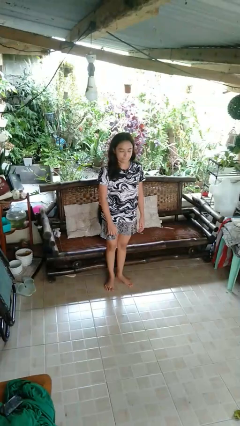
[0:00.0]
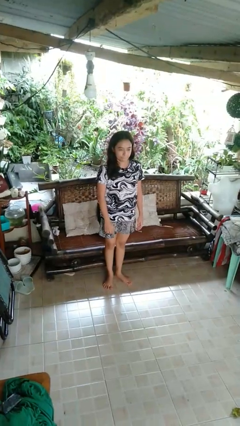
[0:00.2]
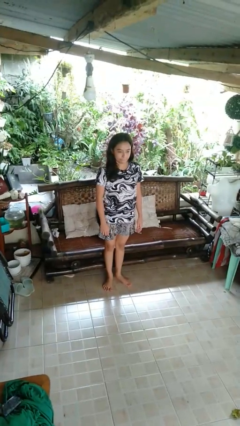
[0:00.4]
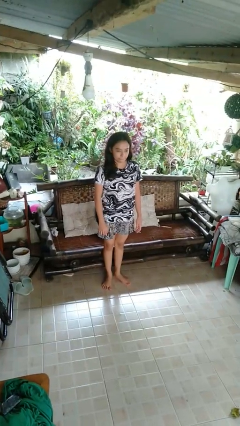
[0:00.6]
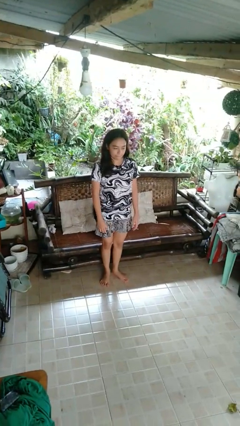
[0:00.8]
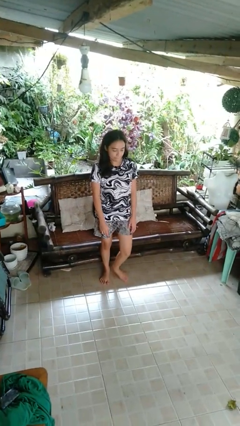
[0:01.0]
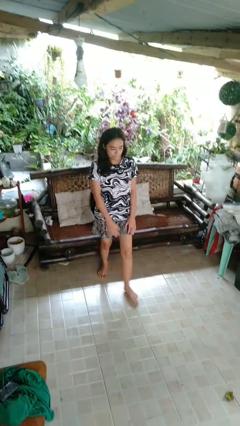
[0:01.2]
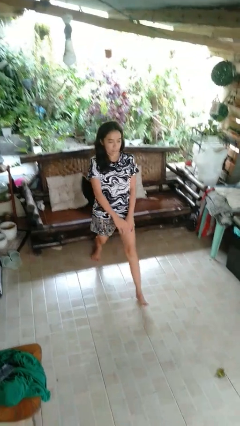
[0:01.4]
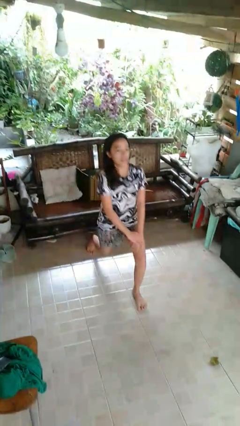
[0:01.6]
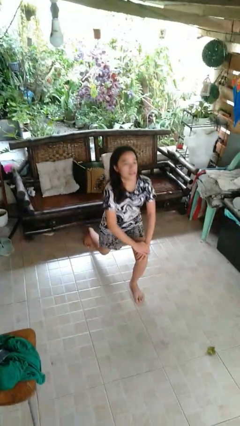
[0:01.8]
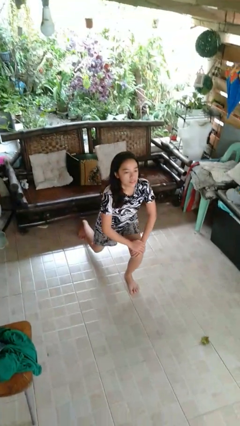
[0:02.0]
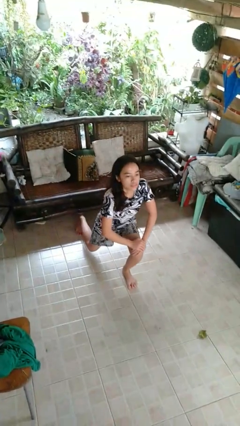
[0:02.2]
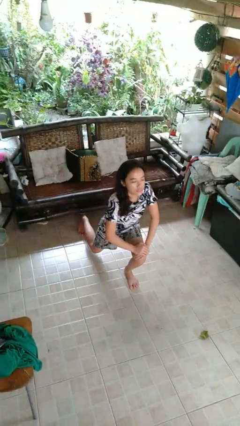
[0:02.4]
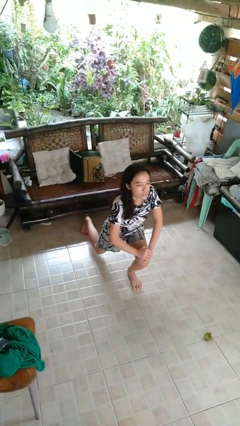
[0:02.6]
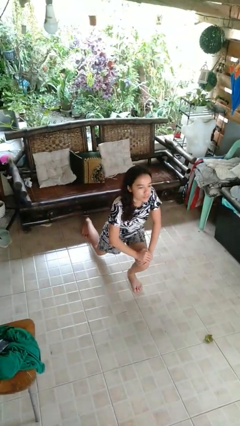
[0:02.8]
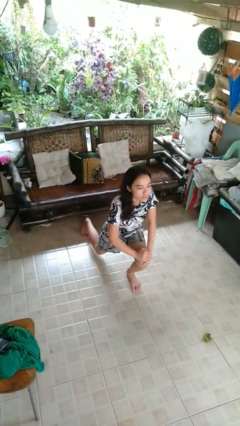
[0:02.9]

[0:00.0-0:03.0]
person exercises with lunges

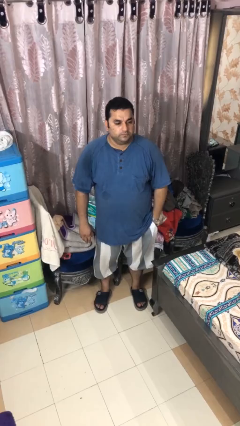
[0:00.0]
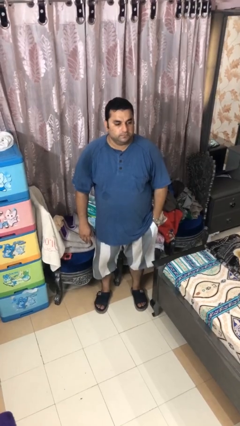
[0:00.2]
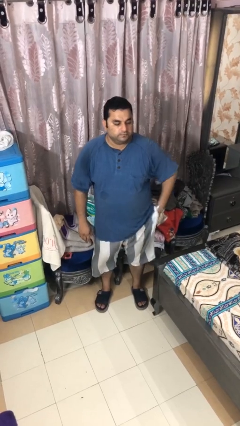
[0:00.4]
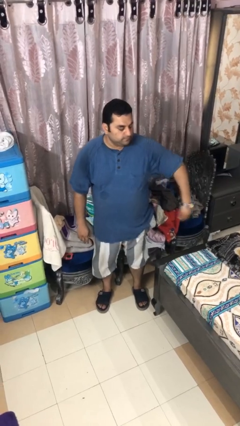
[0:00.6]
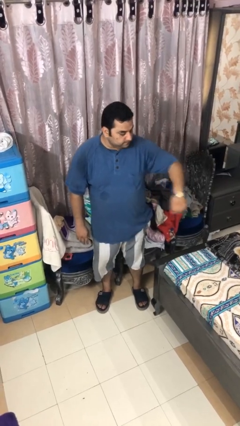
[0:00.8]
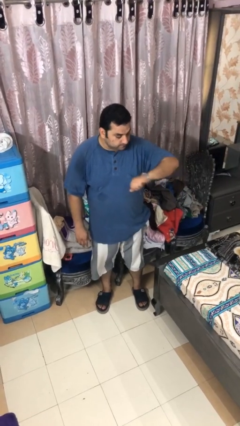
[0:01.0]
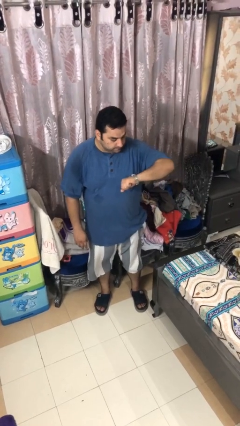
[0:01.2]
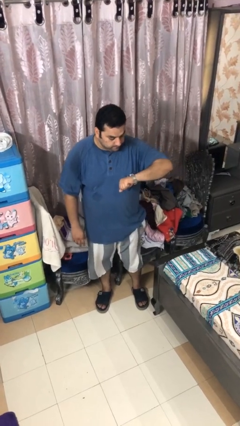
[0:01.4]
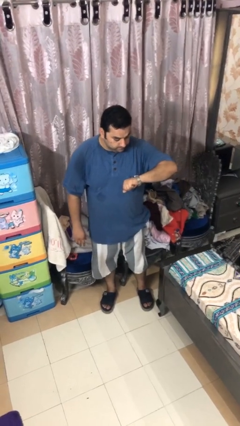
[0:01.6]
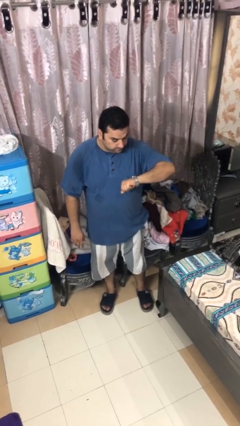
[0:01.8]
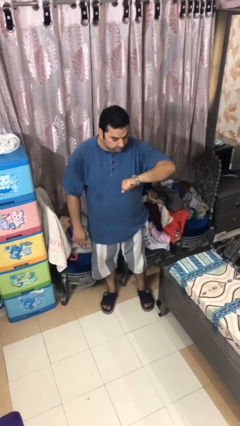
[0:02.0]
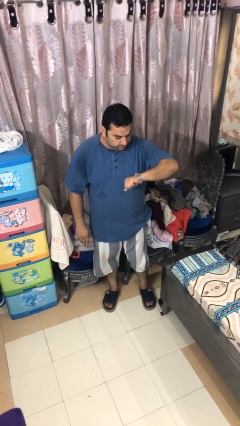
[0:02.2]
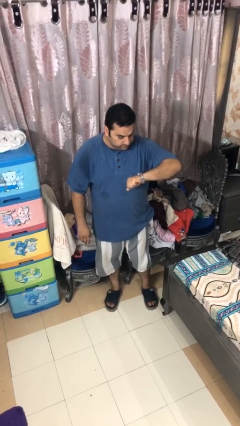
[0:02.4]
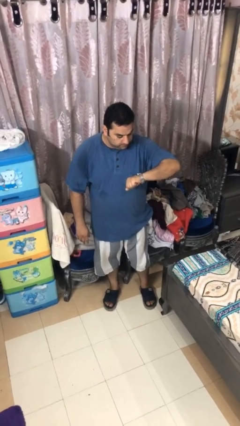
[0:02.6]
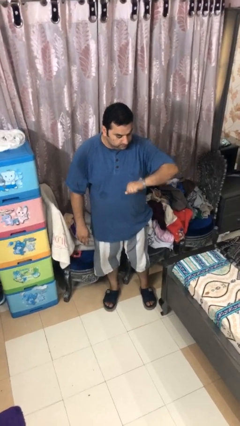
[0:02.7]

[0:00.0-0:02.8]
person looks at wristwatch

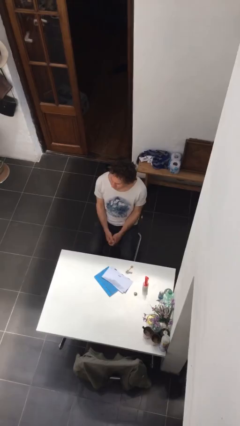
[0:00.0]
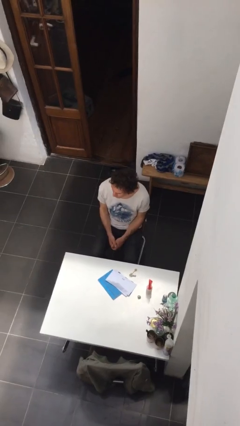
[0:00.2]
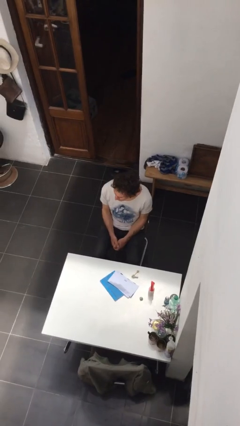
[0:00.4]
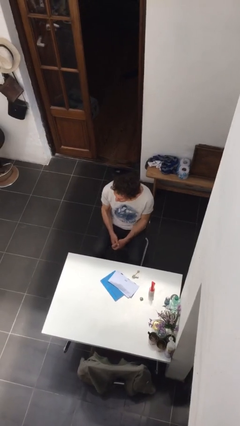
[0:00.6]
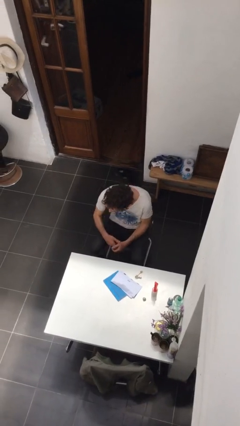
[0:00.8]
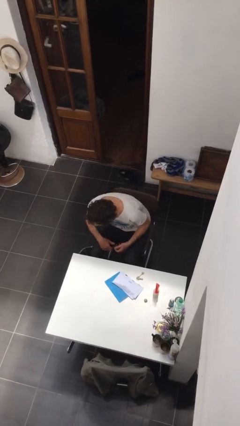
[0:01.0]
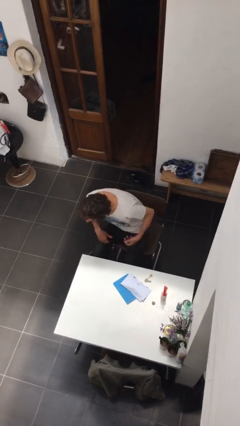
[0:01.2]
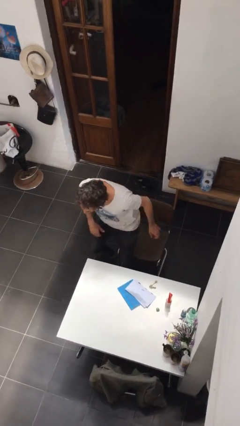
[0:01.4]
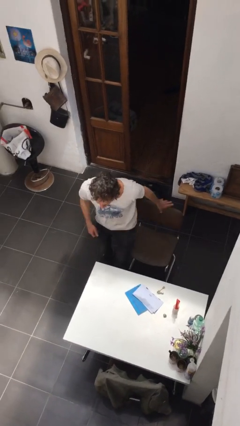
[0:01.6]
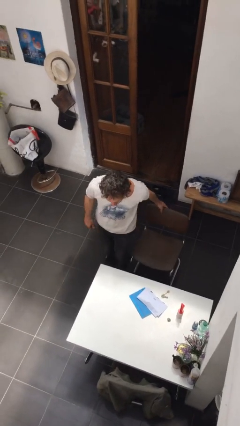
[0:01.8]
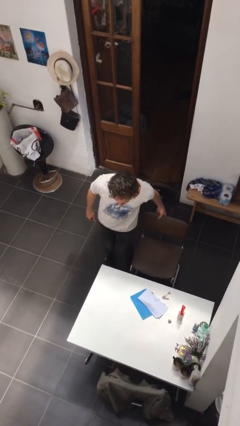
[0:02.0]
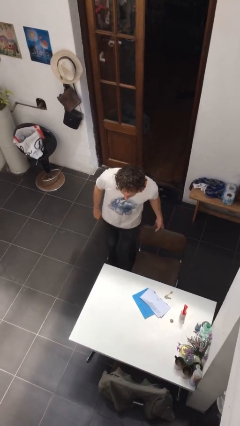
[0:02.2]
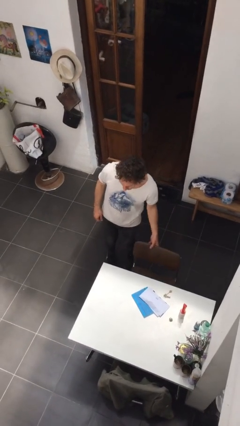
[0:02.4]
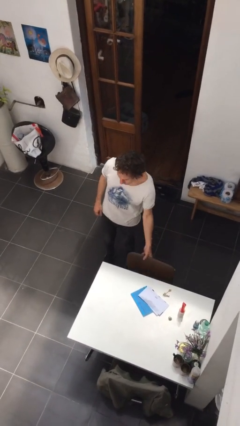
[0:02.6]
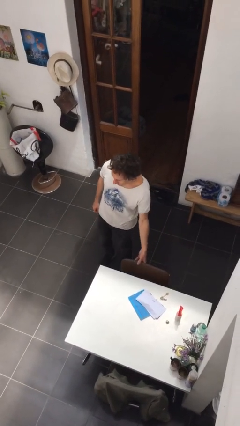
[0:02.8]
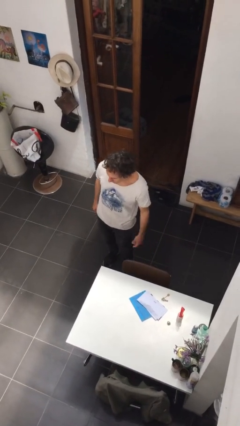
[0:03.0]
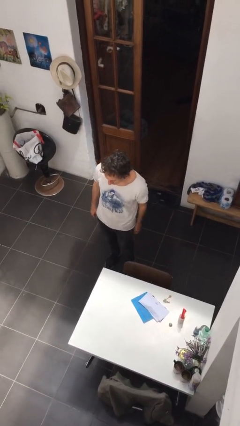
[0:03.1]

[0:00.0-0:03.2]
person stands up

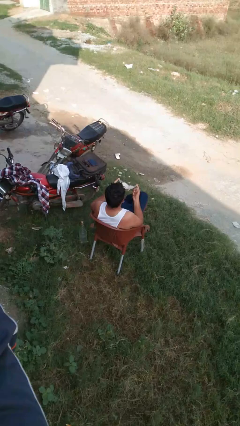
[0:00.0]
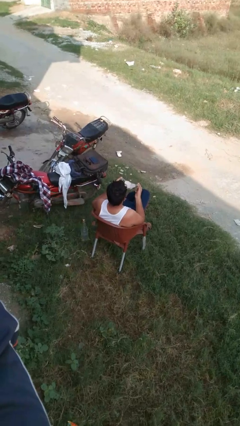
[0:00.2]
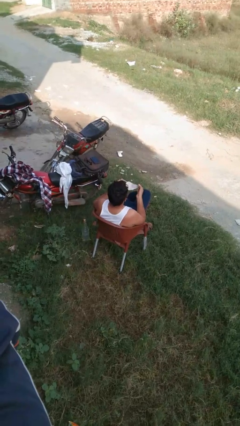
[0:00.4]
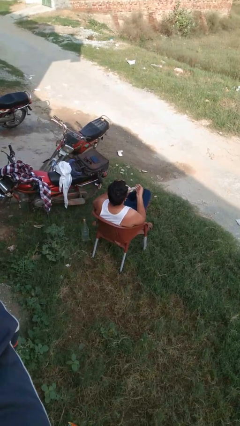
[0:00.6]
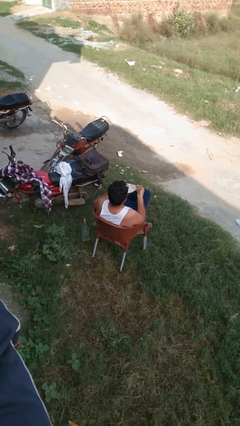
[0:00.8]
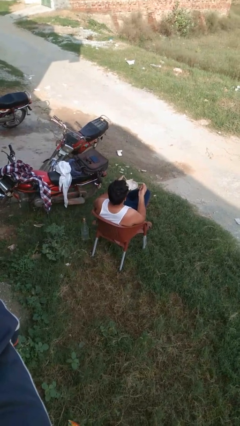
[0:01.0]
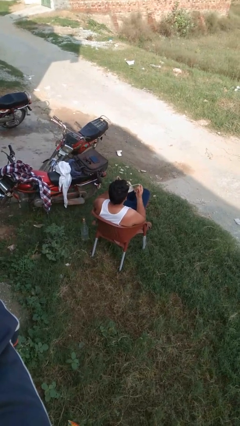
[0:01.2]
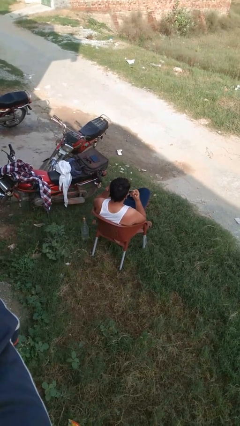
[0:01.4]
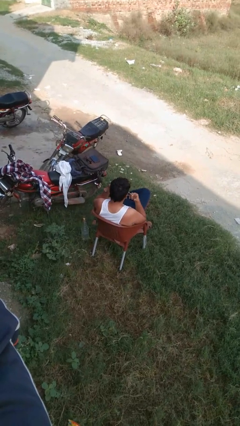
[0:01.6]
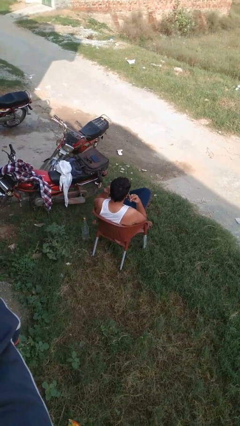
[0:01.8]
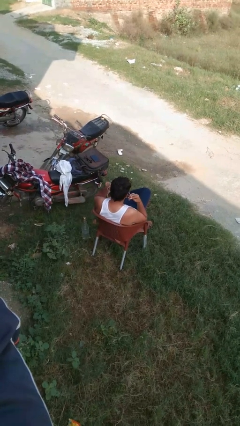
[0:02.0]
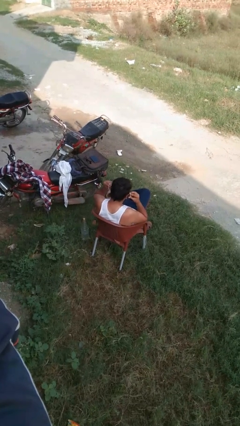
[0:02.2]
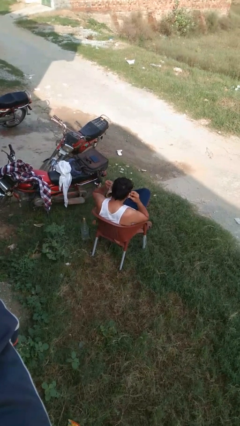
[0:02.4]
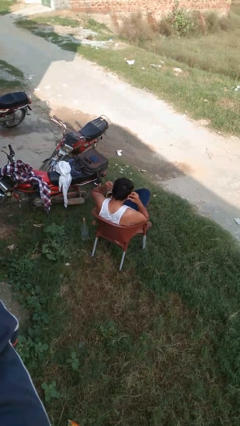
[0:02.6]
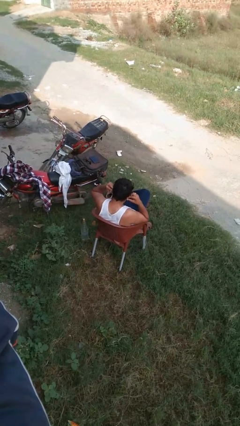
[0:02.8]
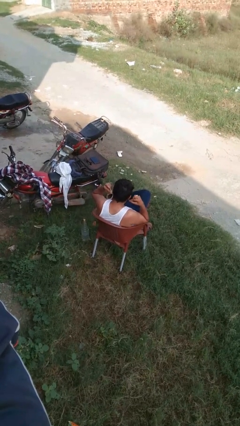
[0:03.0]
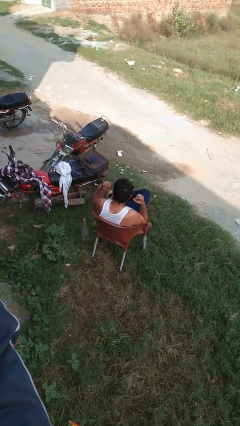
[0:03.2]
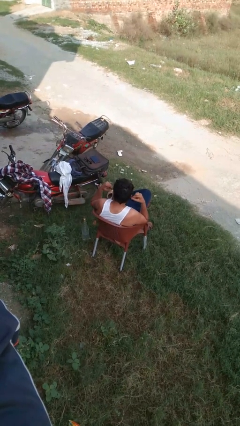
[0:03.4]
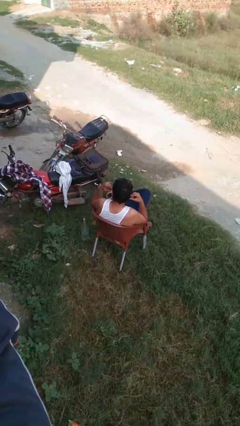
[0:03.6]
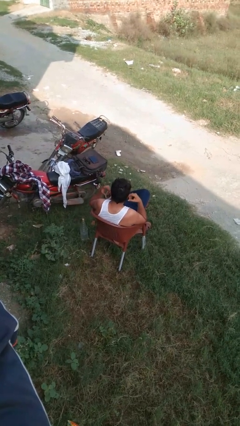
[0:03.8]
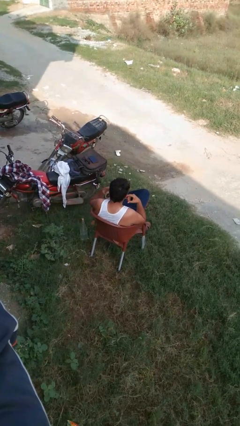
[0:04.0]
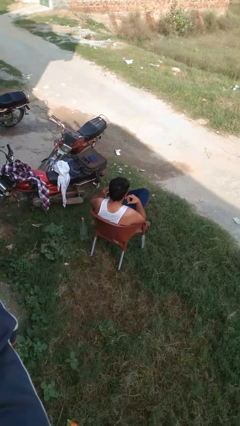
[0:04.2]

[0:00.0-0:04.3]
person puts on facemask

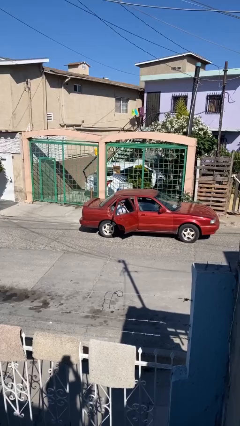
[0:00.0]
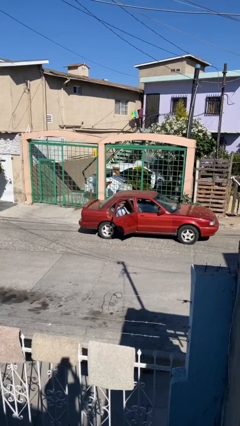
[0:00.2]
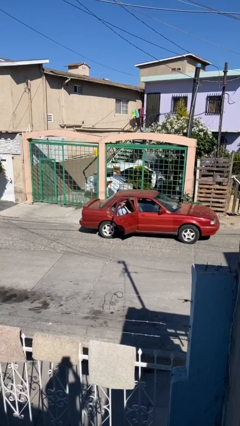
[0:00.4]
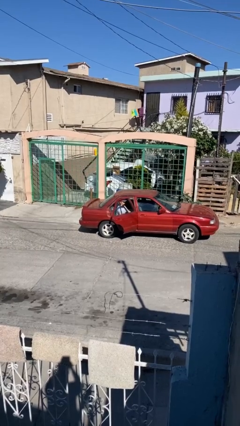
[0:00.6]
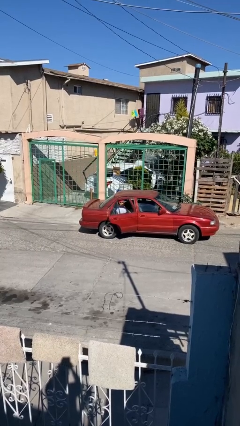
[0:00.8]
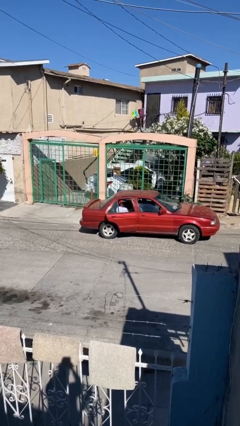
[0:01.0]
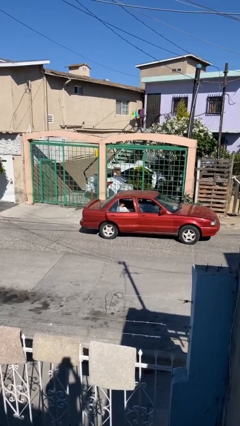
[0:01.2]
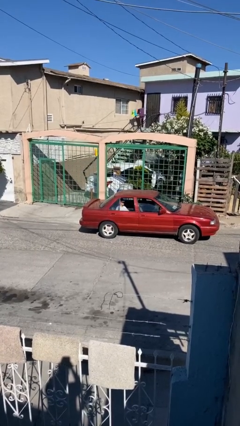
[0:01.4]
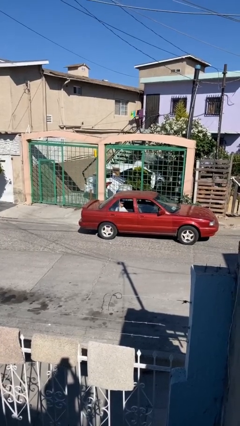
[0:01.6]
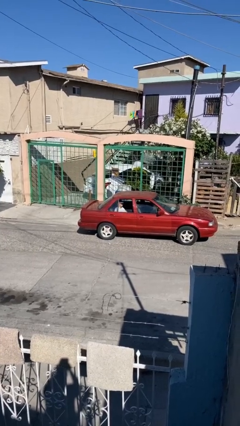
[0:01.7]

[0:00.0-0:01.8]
person closes car door

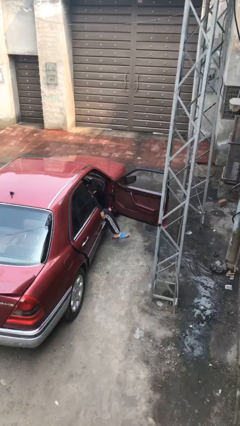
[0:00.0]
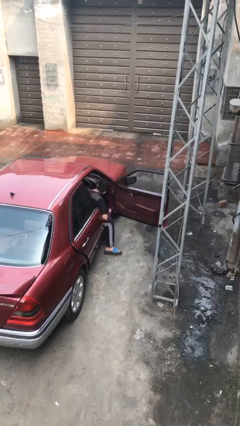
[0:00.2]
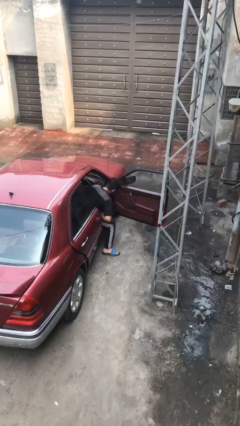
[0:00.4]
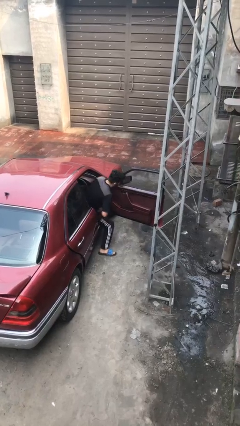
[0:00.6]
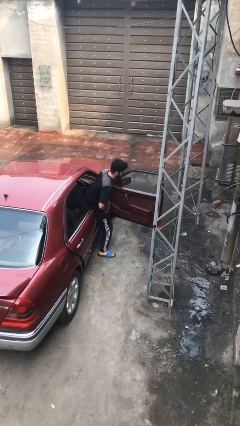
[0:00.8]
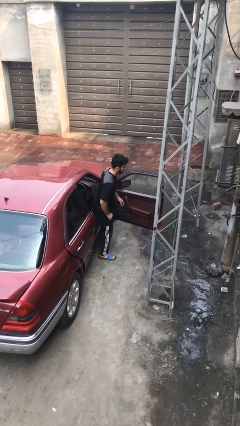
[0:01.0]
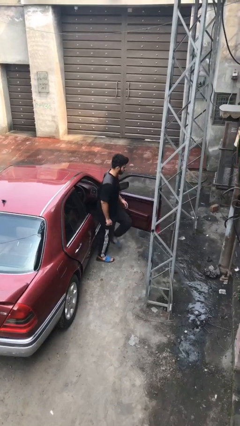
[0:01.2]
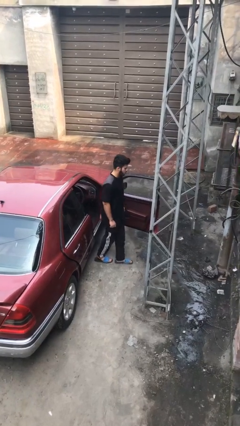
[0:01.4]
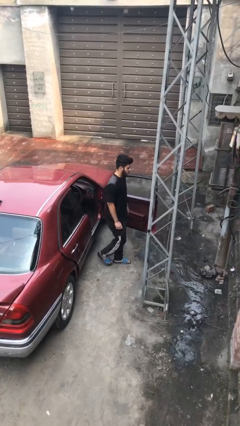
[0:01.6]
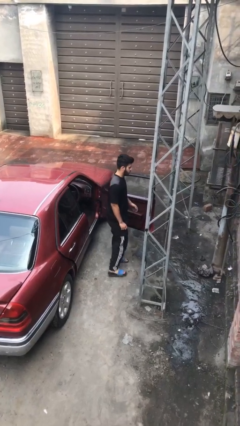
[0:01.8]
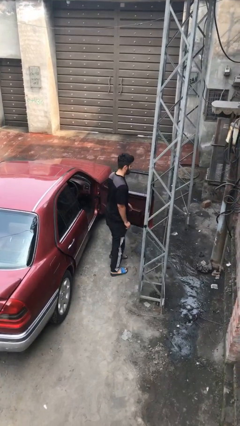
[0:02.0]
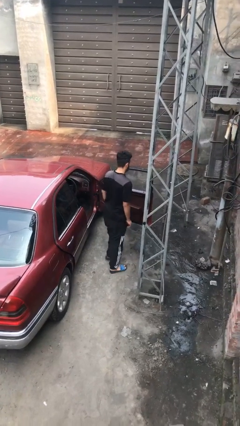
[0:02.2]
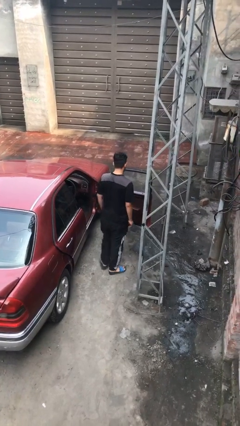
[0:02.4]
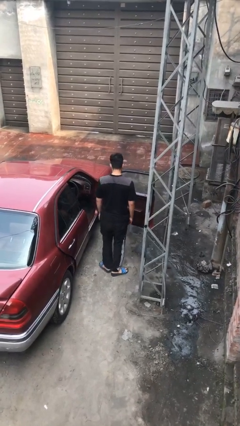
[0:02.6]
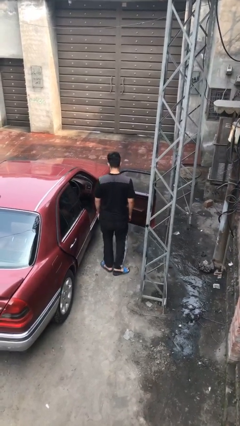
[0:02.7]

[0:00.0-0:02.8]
person exits car
